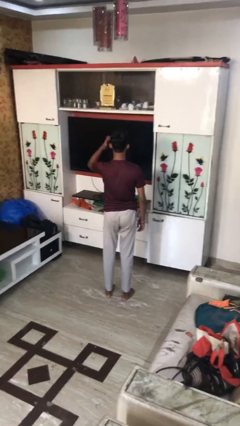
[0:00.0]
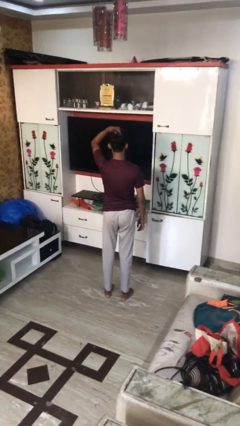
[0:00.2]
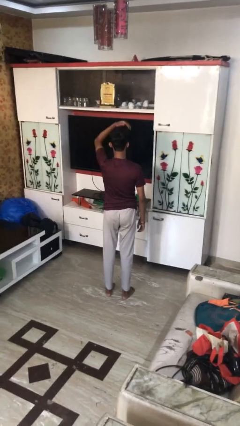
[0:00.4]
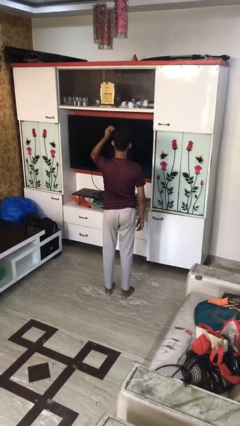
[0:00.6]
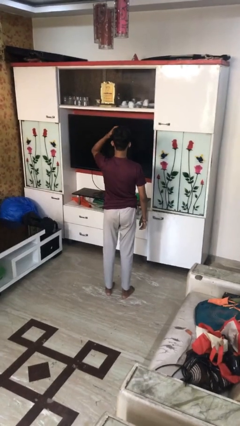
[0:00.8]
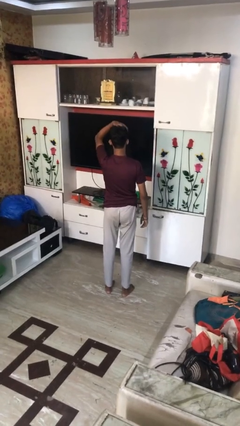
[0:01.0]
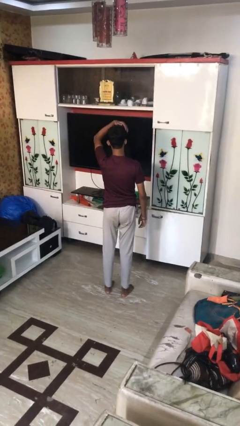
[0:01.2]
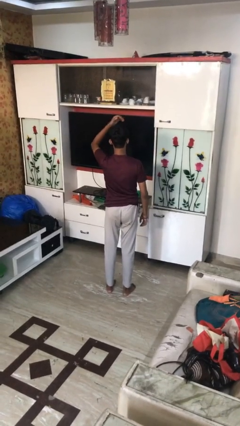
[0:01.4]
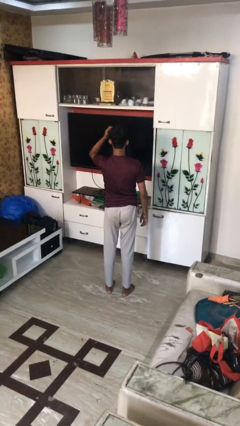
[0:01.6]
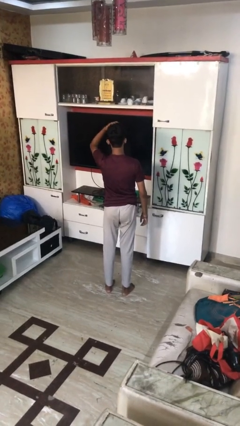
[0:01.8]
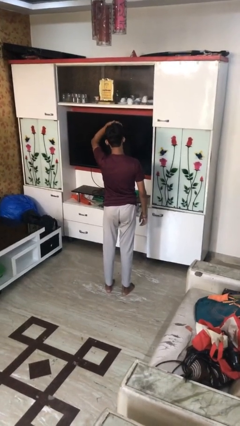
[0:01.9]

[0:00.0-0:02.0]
person strokes hair

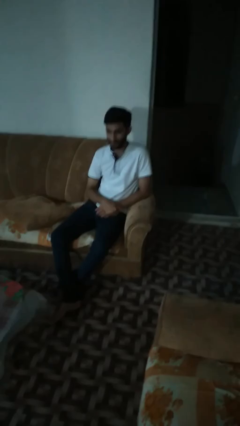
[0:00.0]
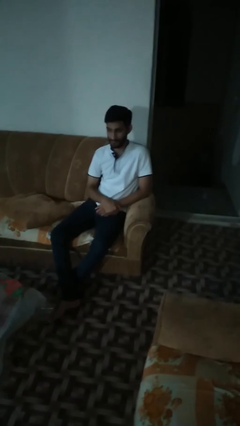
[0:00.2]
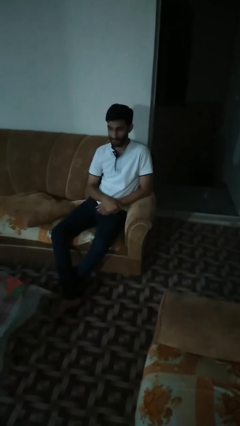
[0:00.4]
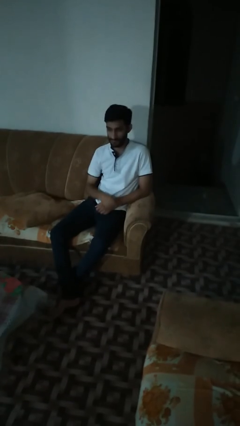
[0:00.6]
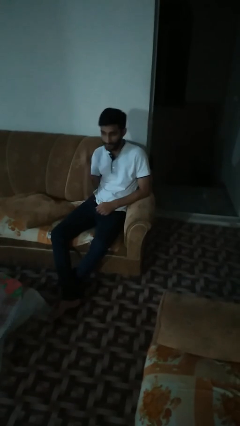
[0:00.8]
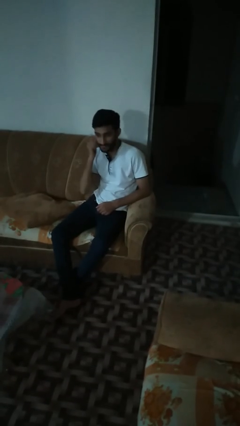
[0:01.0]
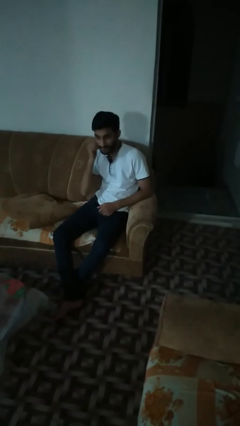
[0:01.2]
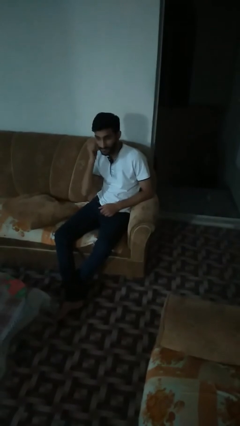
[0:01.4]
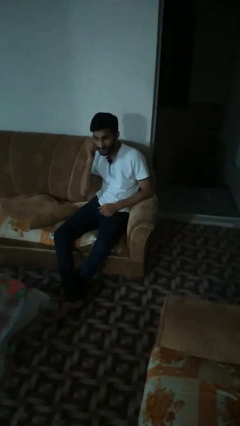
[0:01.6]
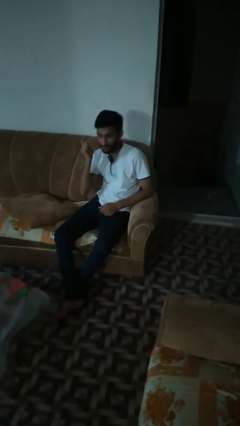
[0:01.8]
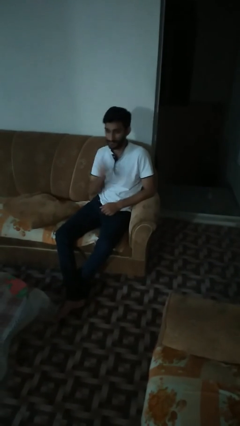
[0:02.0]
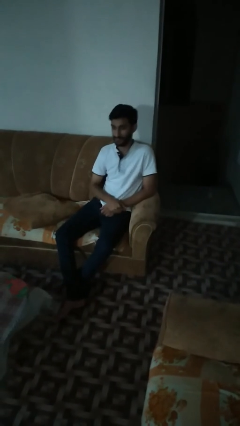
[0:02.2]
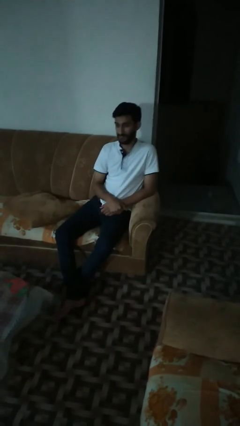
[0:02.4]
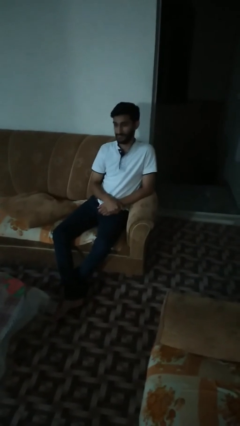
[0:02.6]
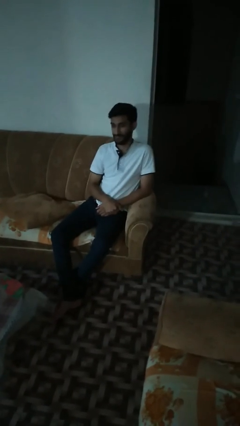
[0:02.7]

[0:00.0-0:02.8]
person gestures listen closely

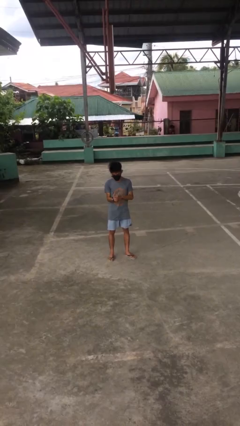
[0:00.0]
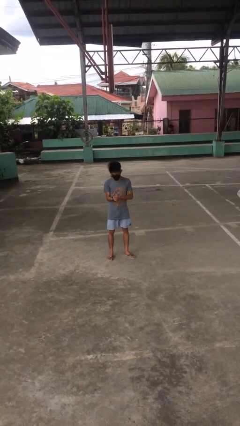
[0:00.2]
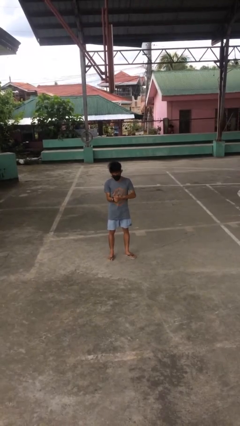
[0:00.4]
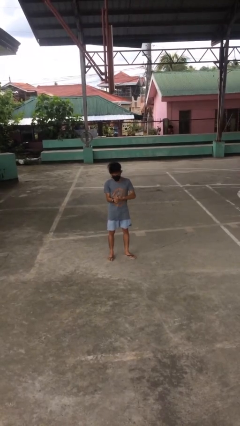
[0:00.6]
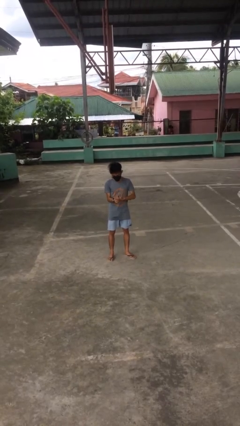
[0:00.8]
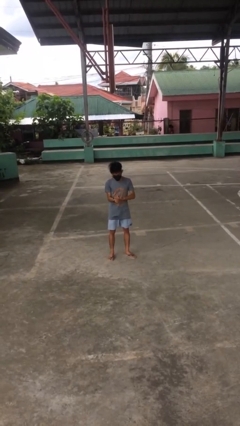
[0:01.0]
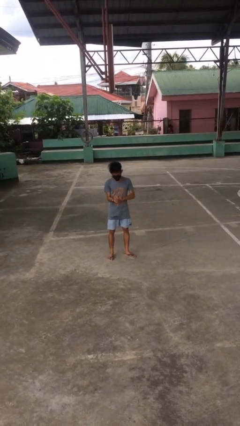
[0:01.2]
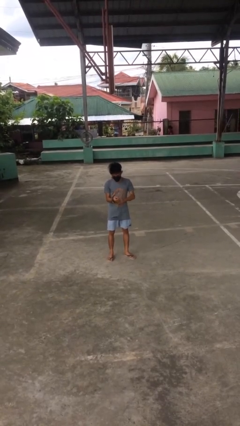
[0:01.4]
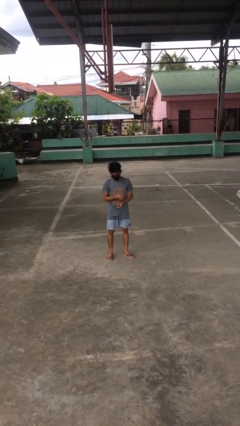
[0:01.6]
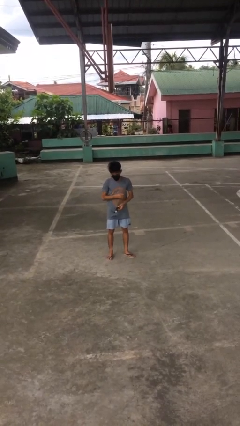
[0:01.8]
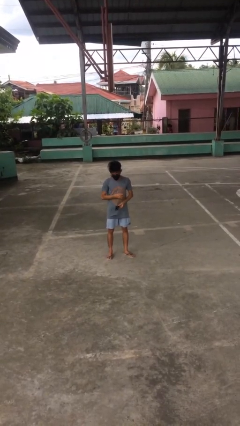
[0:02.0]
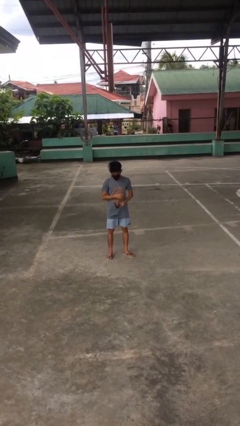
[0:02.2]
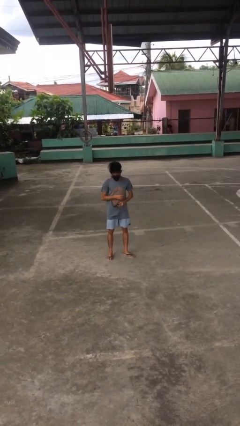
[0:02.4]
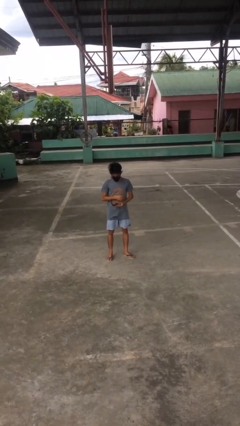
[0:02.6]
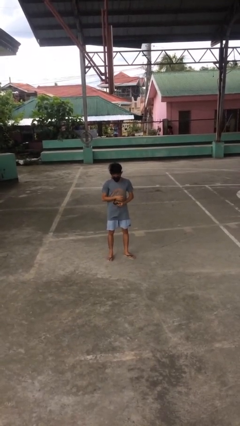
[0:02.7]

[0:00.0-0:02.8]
person takes off wristwatch

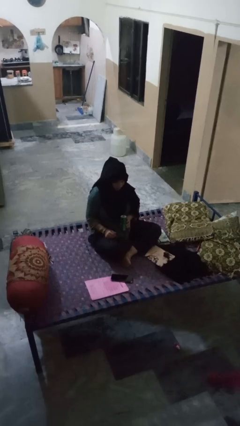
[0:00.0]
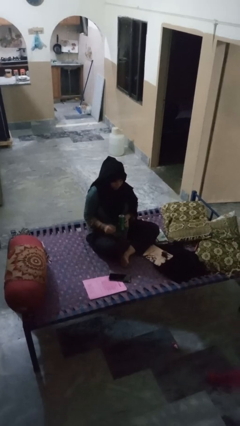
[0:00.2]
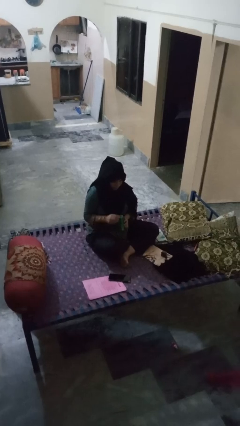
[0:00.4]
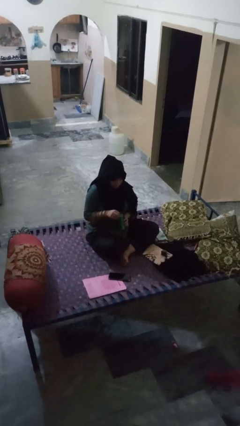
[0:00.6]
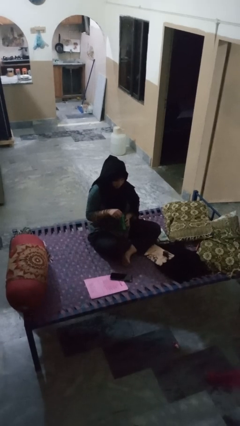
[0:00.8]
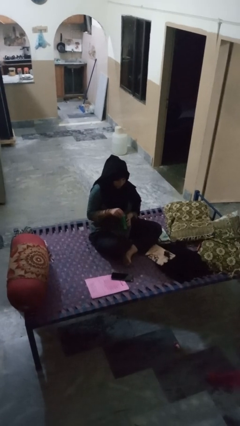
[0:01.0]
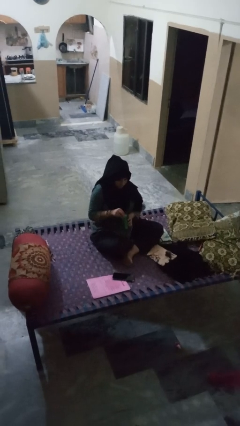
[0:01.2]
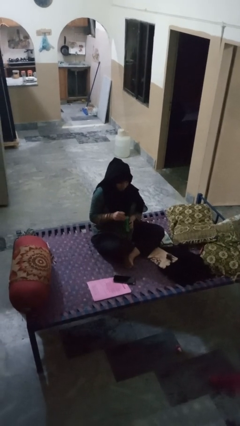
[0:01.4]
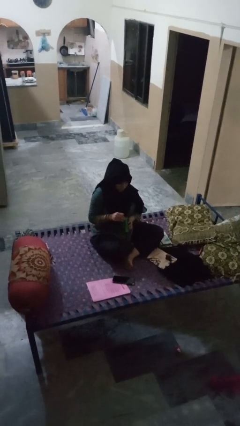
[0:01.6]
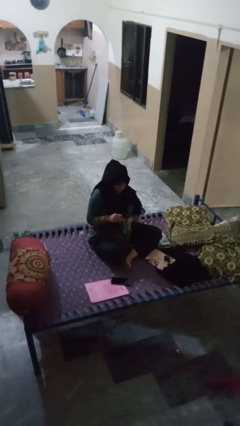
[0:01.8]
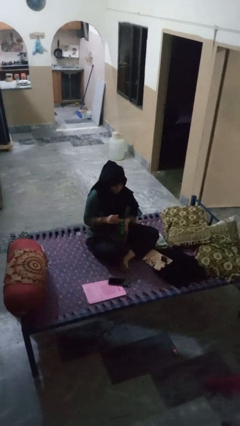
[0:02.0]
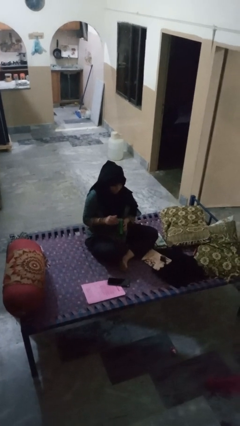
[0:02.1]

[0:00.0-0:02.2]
person opens can with can opener

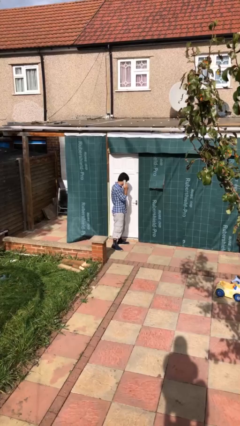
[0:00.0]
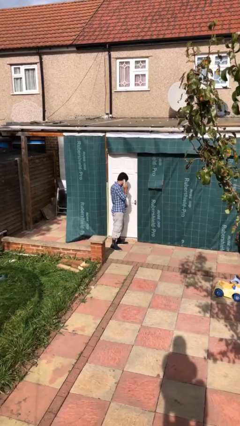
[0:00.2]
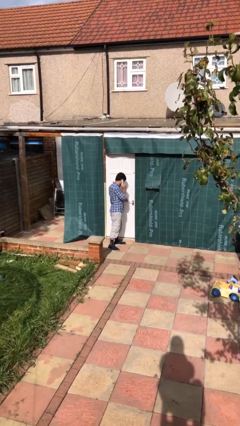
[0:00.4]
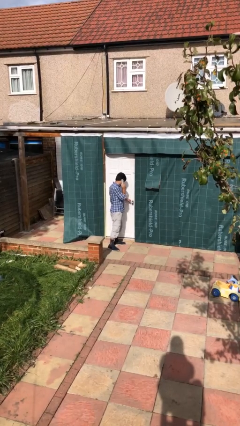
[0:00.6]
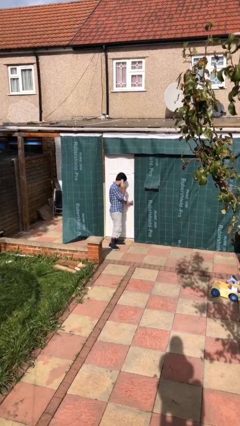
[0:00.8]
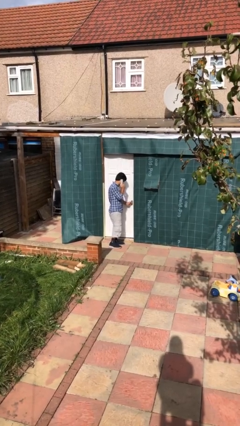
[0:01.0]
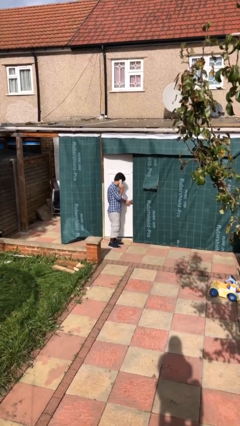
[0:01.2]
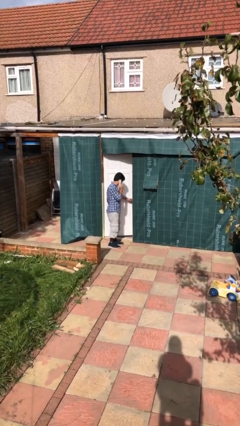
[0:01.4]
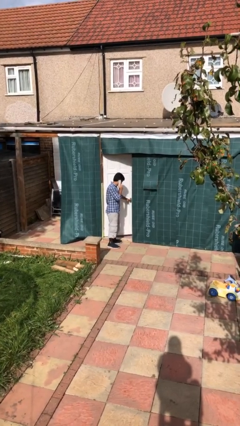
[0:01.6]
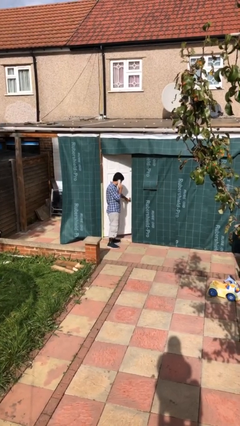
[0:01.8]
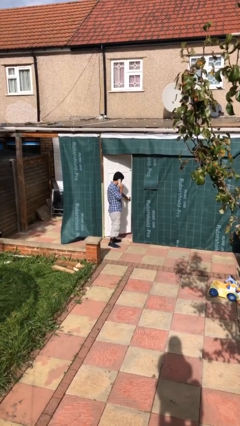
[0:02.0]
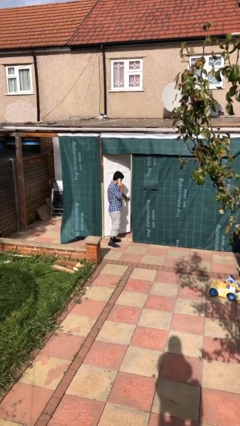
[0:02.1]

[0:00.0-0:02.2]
person opens facility door

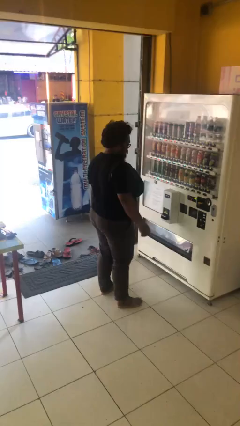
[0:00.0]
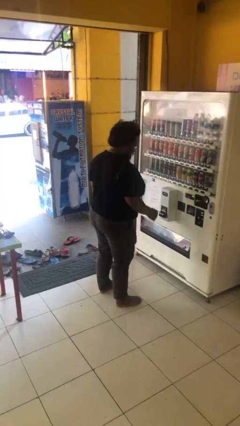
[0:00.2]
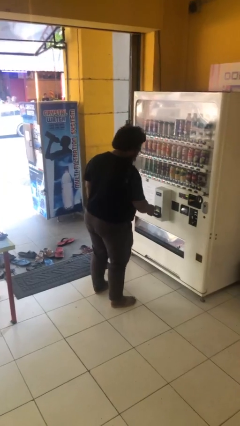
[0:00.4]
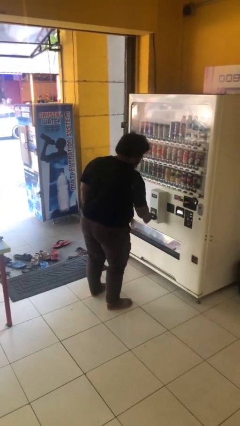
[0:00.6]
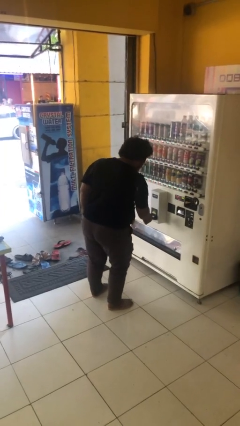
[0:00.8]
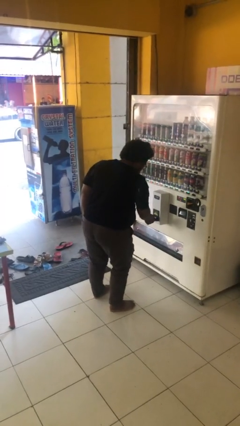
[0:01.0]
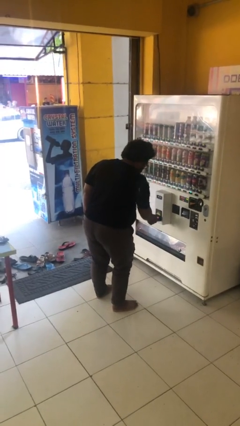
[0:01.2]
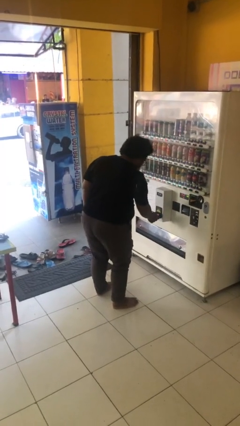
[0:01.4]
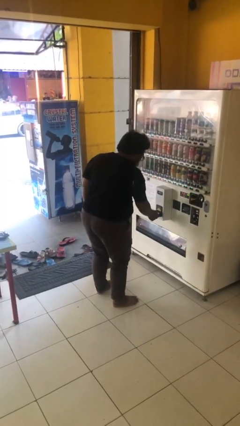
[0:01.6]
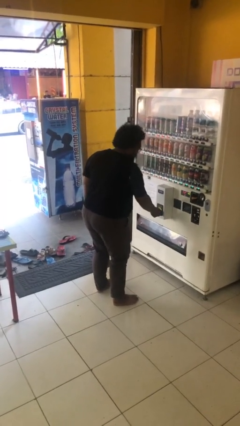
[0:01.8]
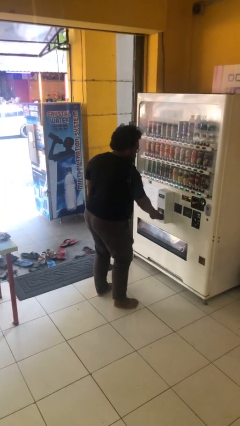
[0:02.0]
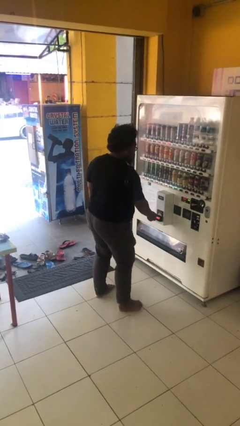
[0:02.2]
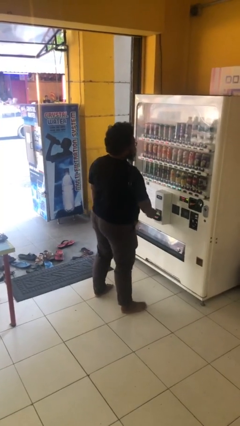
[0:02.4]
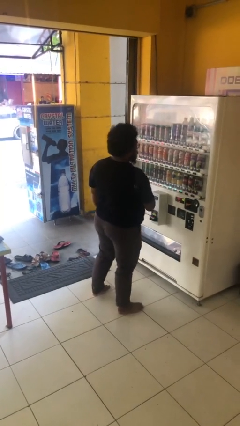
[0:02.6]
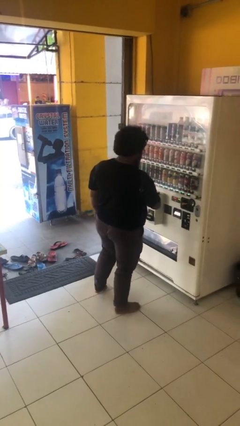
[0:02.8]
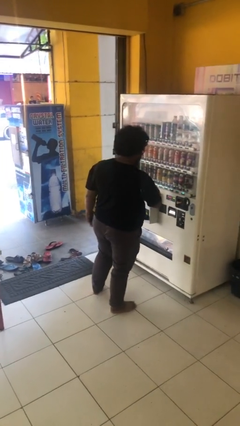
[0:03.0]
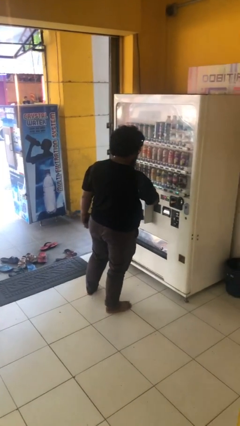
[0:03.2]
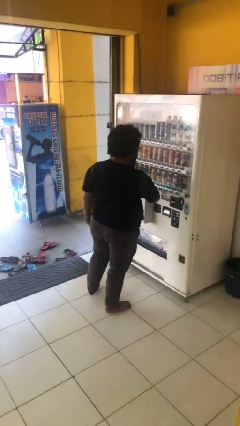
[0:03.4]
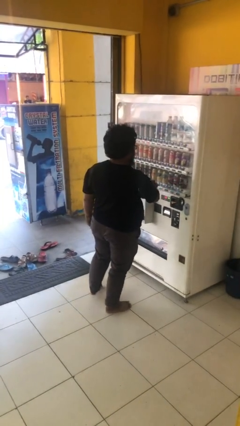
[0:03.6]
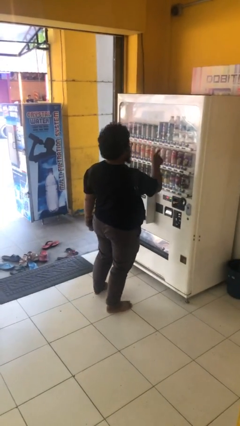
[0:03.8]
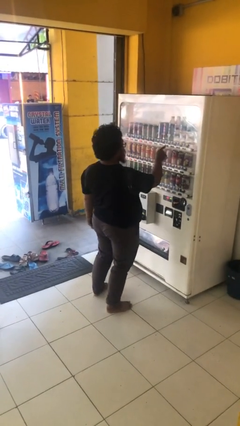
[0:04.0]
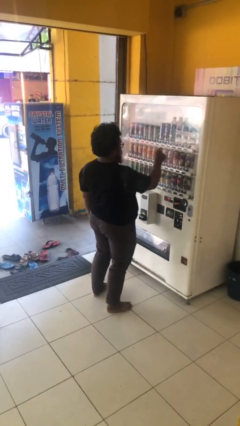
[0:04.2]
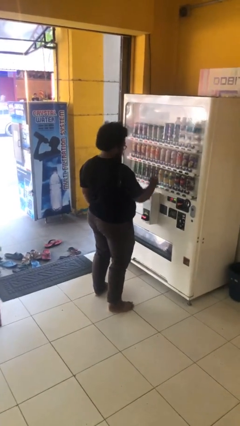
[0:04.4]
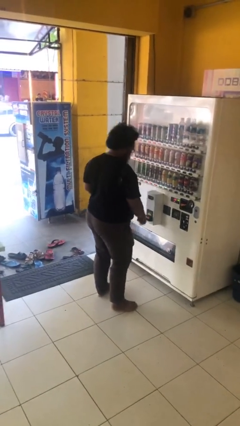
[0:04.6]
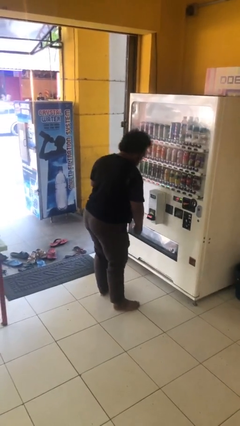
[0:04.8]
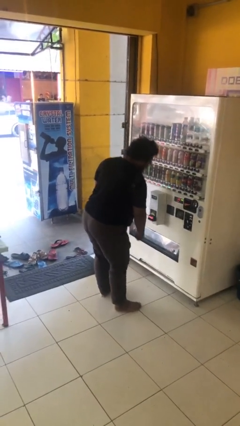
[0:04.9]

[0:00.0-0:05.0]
person purchases from machine

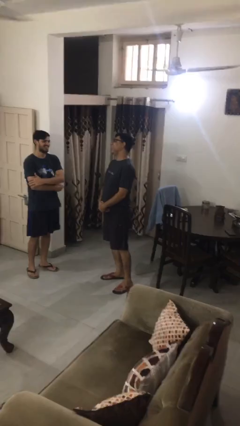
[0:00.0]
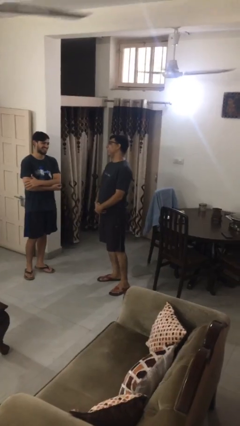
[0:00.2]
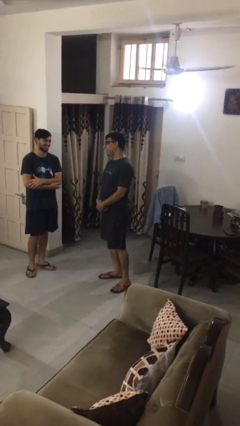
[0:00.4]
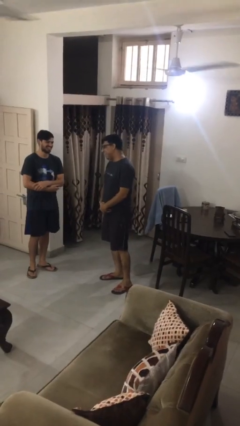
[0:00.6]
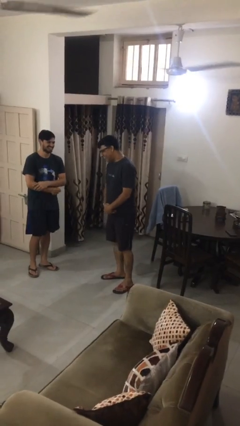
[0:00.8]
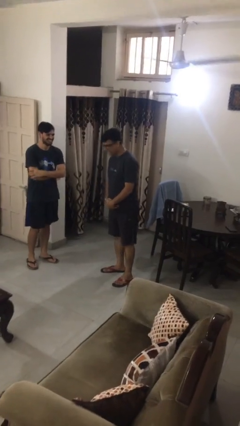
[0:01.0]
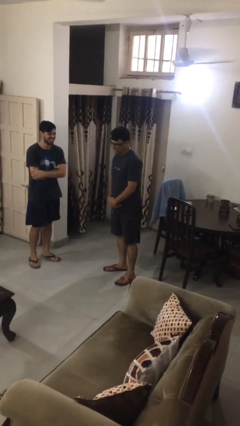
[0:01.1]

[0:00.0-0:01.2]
person laughs with person
